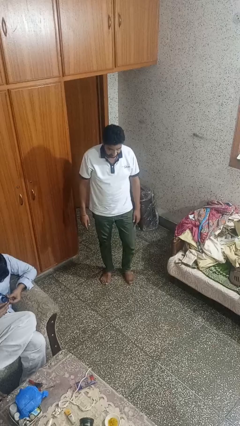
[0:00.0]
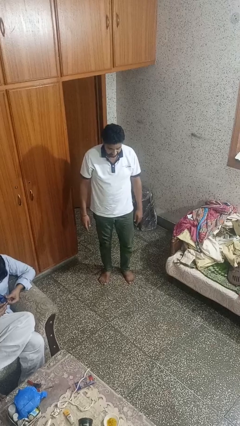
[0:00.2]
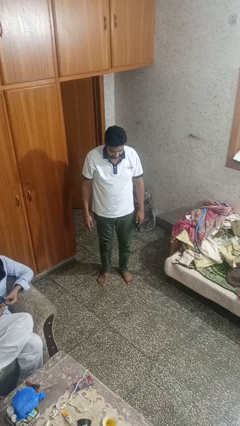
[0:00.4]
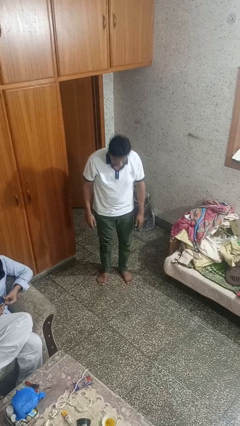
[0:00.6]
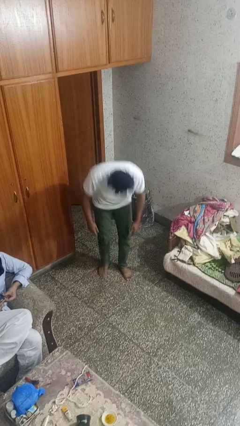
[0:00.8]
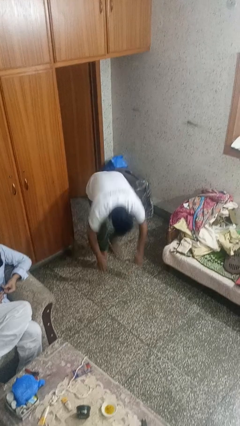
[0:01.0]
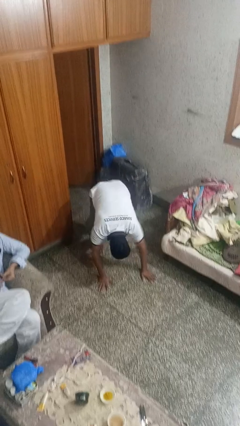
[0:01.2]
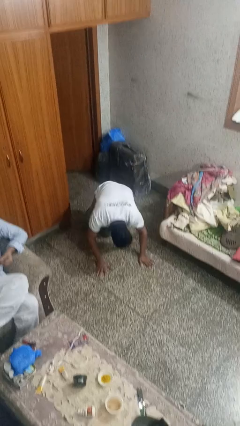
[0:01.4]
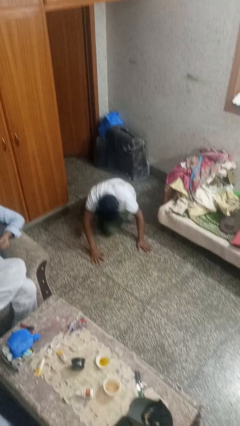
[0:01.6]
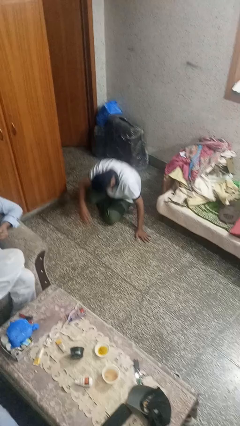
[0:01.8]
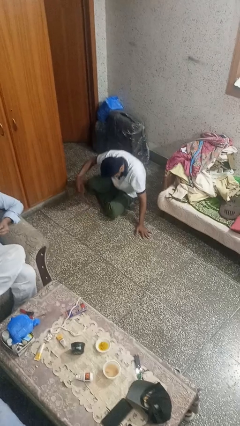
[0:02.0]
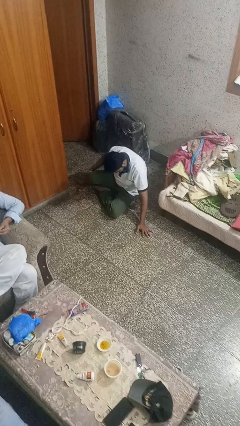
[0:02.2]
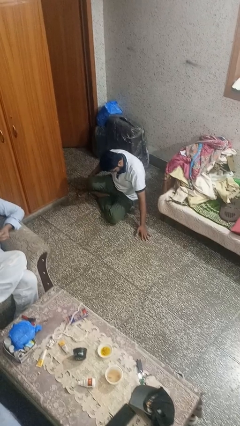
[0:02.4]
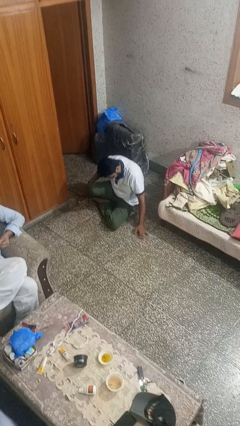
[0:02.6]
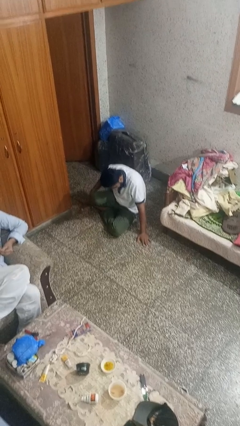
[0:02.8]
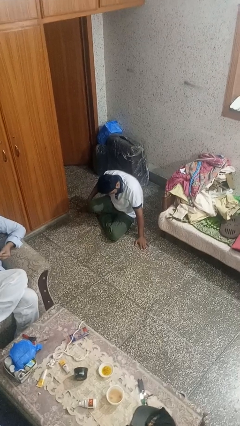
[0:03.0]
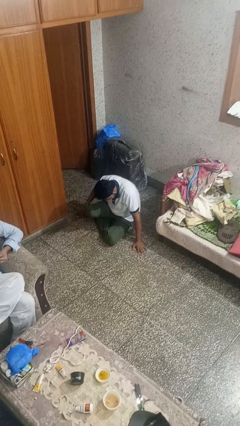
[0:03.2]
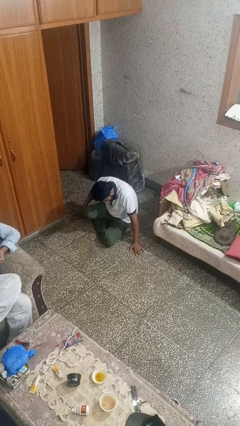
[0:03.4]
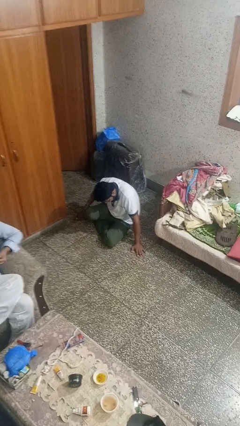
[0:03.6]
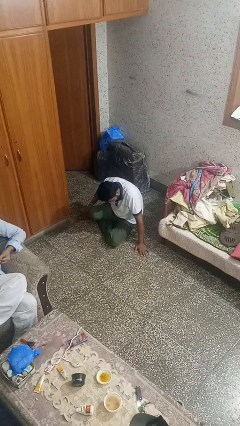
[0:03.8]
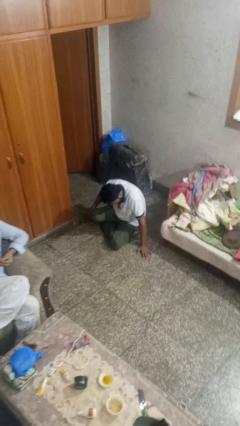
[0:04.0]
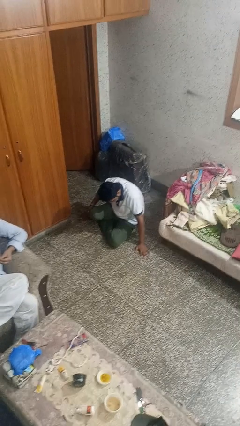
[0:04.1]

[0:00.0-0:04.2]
person falls while standing

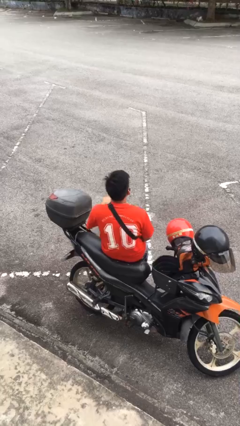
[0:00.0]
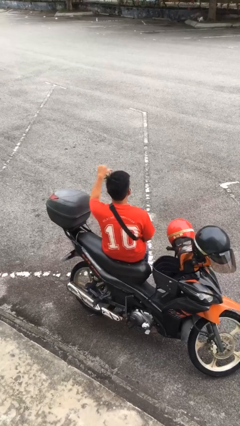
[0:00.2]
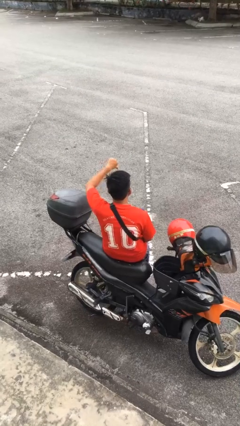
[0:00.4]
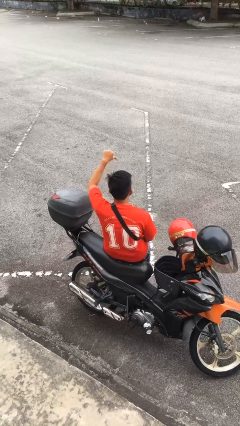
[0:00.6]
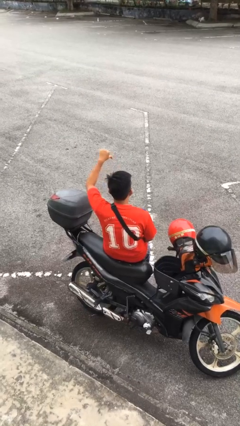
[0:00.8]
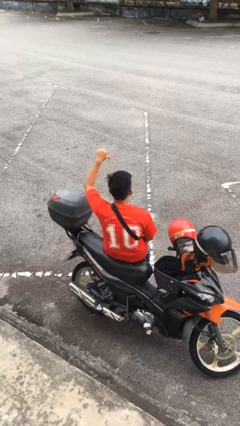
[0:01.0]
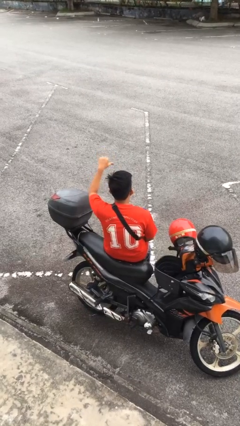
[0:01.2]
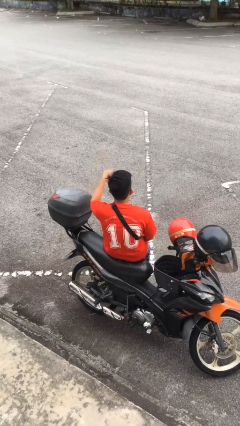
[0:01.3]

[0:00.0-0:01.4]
person gestures thumbs down

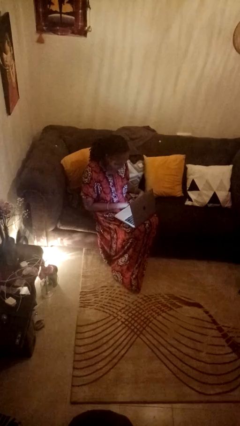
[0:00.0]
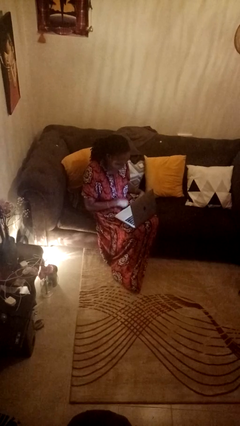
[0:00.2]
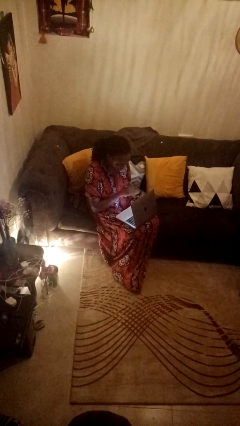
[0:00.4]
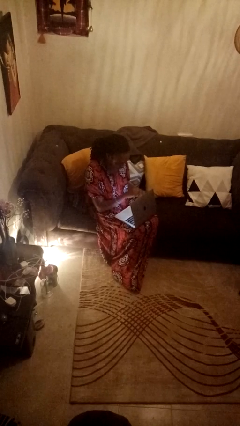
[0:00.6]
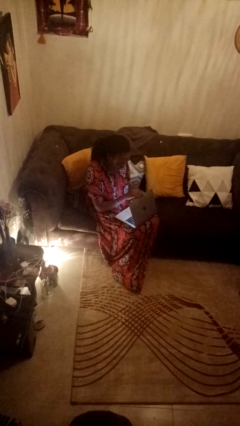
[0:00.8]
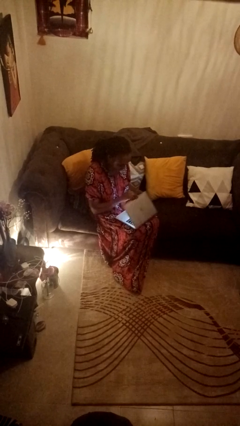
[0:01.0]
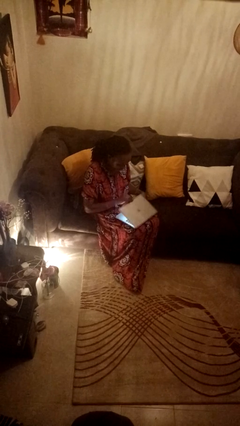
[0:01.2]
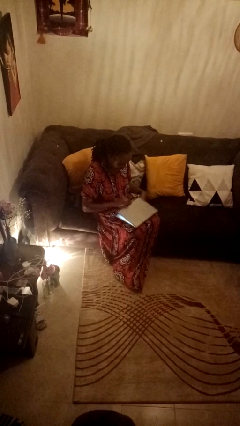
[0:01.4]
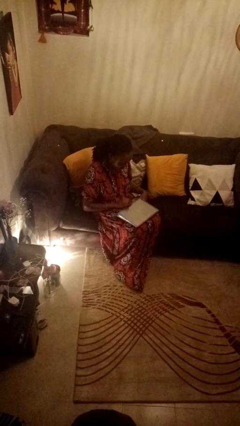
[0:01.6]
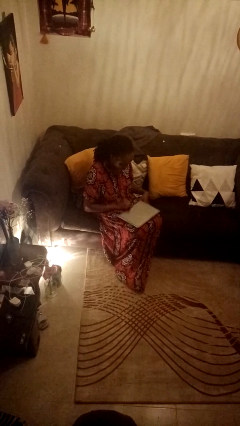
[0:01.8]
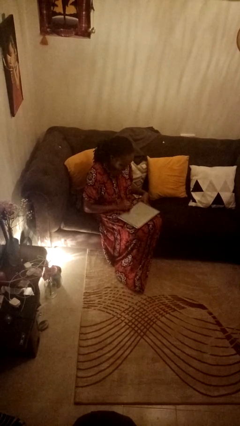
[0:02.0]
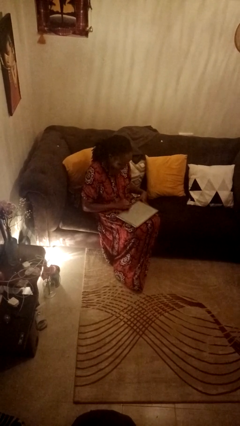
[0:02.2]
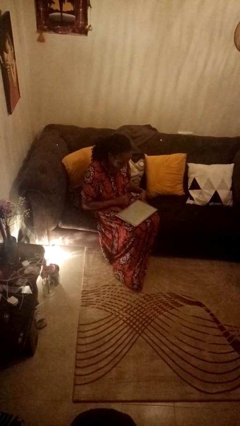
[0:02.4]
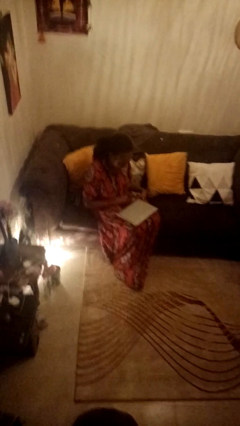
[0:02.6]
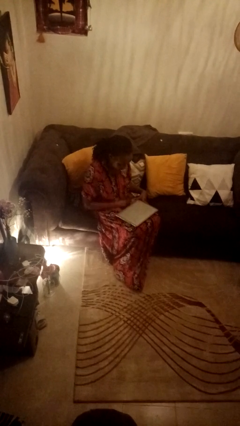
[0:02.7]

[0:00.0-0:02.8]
person closes laptop

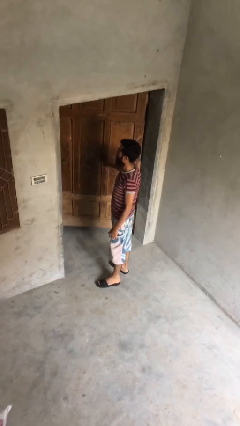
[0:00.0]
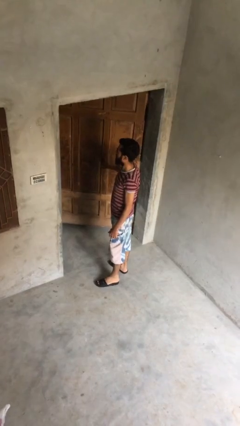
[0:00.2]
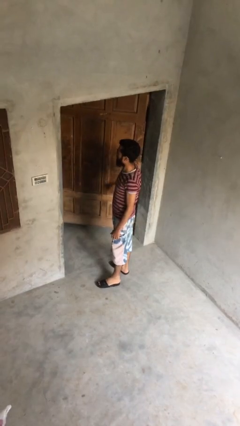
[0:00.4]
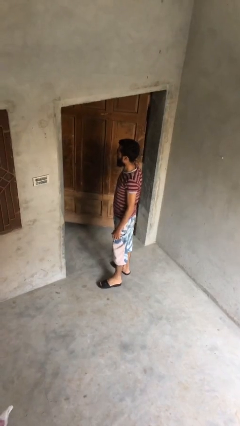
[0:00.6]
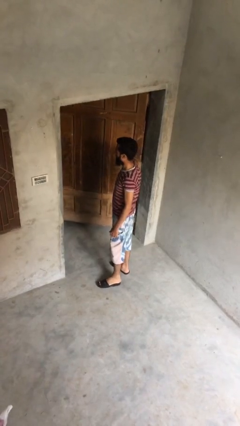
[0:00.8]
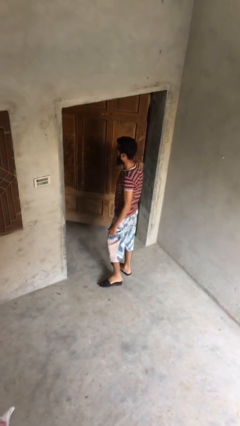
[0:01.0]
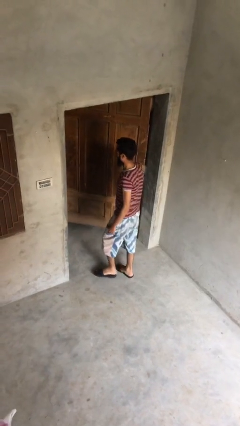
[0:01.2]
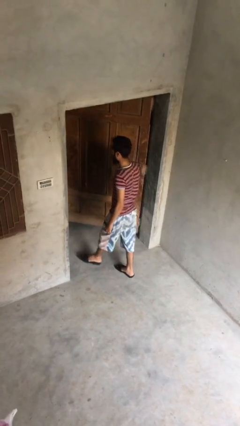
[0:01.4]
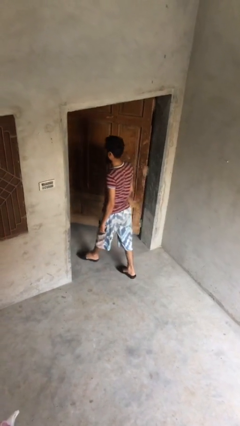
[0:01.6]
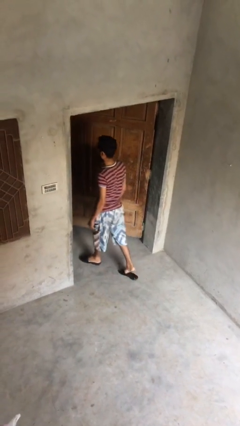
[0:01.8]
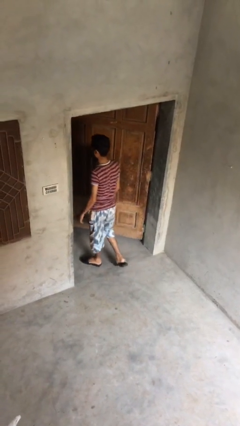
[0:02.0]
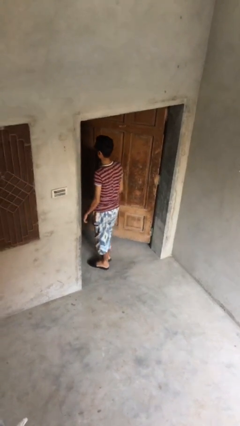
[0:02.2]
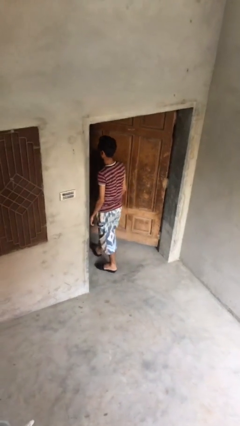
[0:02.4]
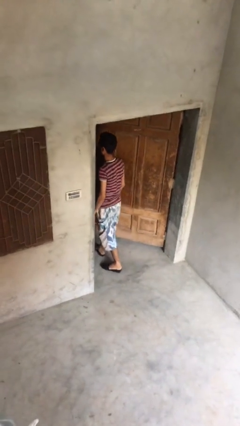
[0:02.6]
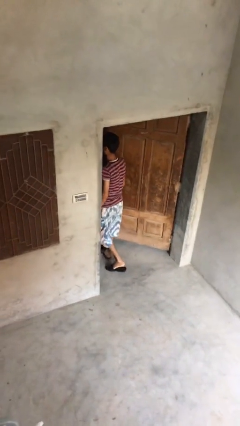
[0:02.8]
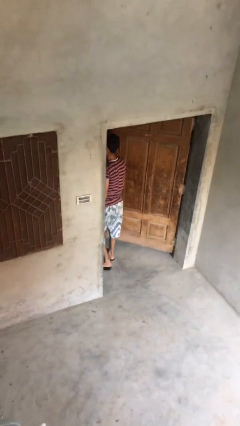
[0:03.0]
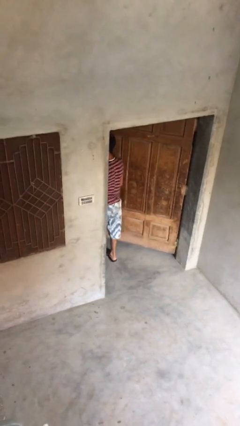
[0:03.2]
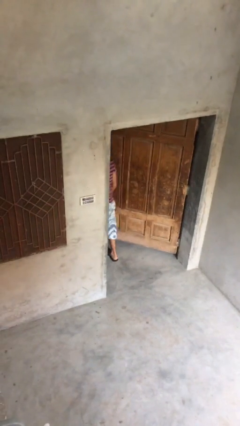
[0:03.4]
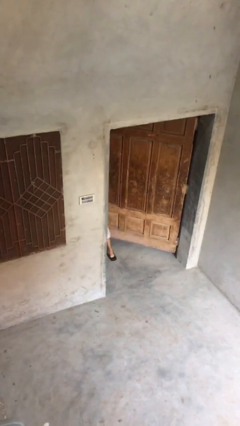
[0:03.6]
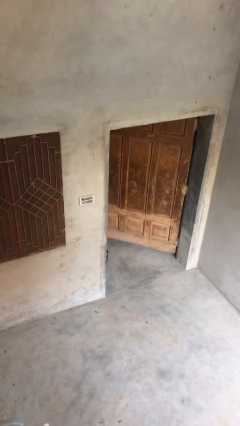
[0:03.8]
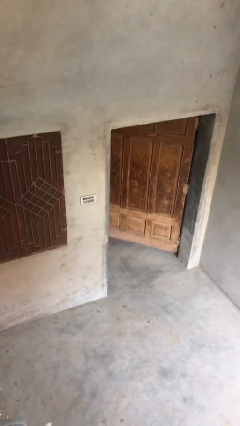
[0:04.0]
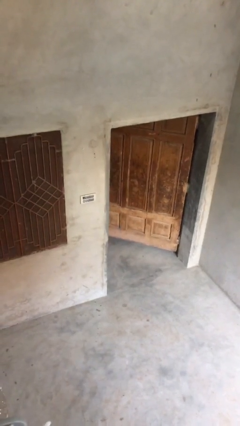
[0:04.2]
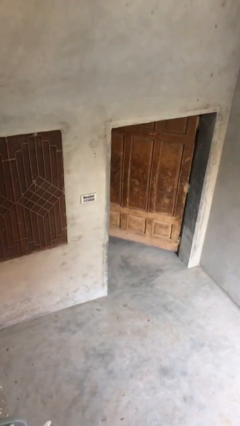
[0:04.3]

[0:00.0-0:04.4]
person exits scene through structure

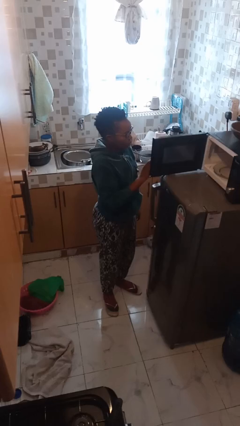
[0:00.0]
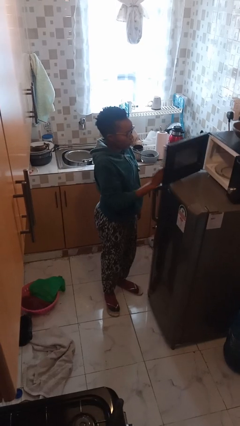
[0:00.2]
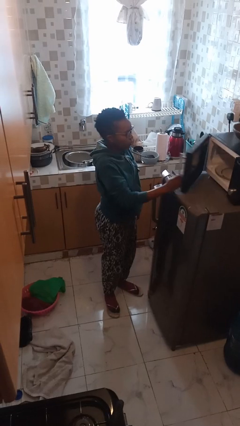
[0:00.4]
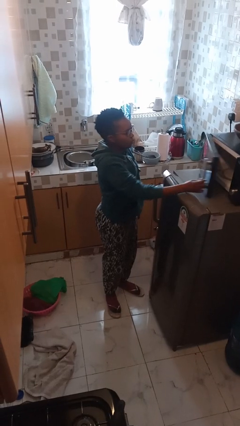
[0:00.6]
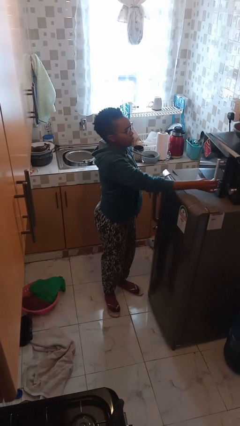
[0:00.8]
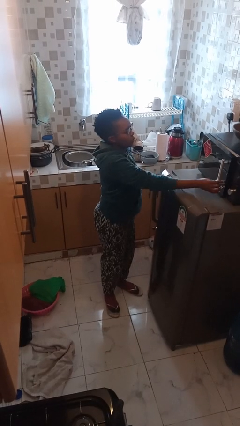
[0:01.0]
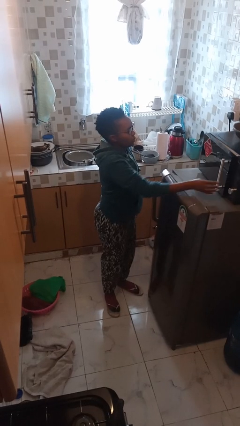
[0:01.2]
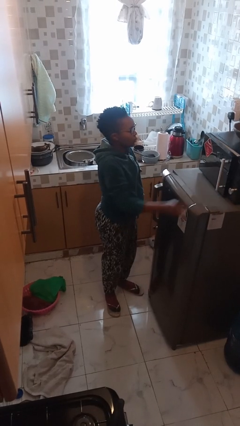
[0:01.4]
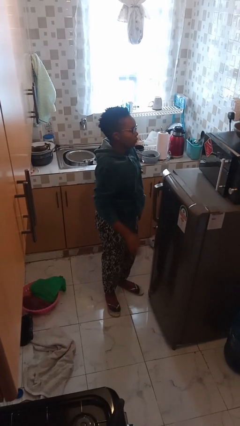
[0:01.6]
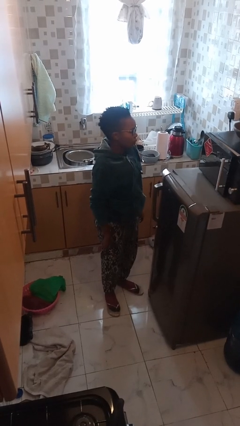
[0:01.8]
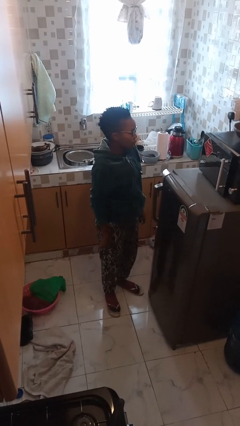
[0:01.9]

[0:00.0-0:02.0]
person closes microwave

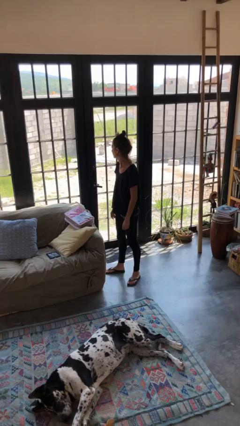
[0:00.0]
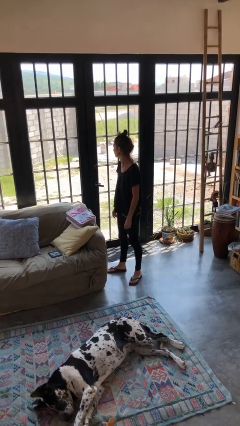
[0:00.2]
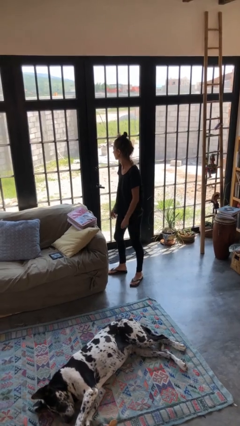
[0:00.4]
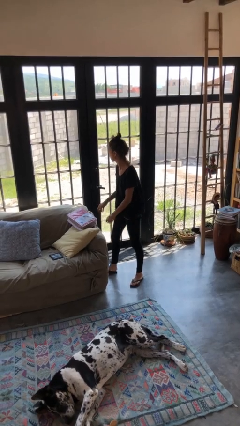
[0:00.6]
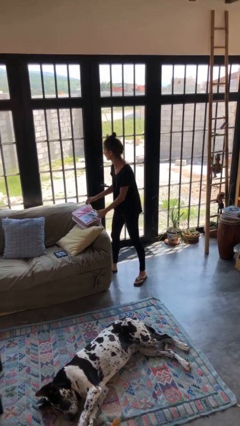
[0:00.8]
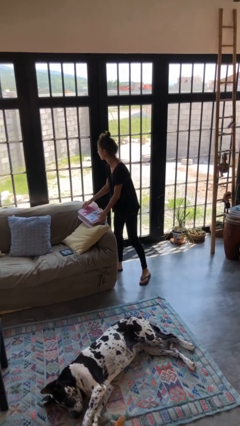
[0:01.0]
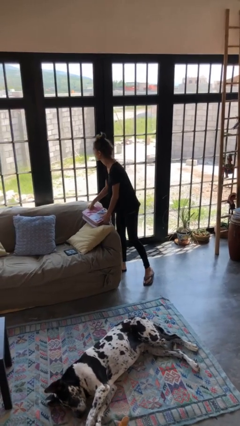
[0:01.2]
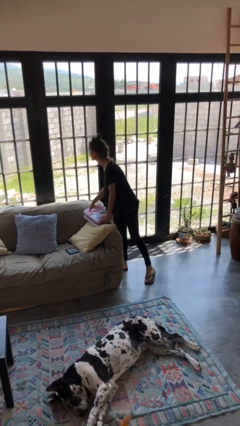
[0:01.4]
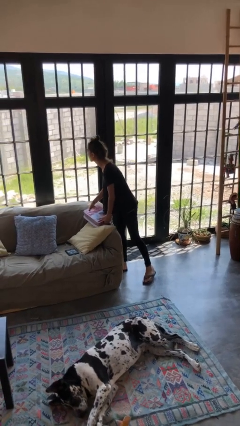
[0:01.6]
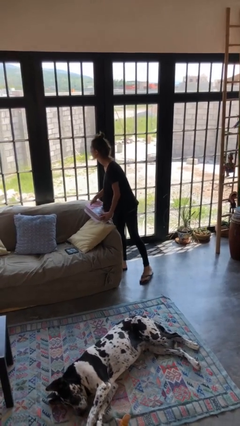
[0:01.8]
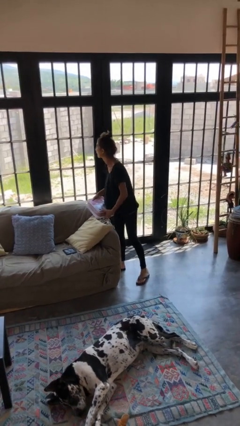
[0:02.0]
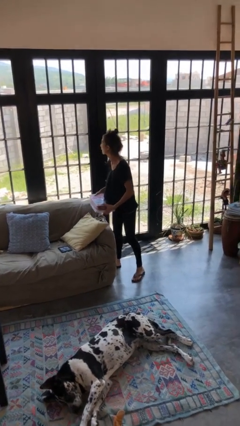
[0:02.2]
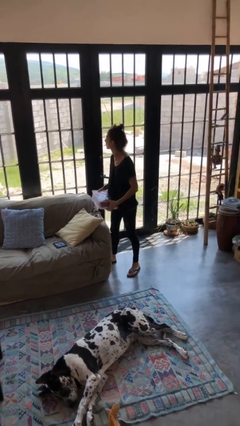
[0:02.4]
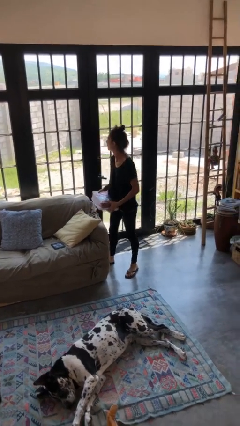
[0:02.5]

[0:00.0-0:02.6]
person picks up object from couch
